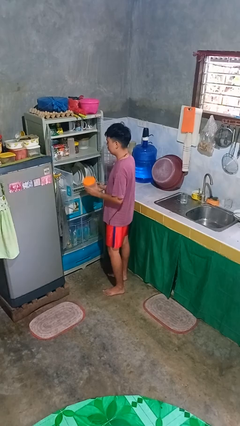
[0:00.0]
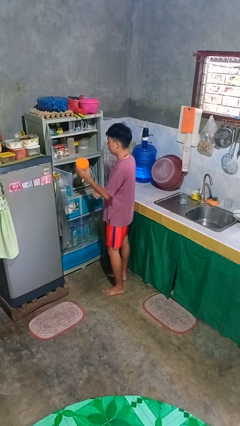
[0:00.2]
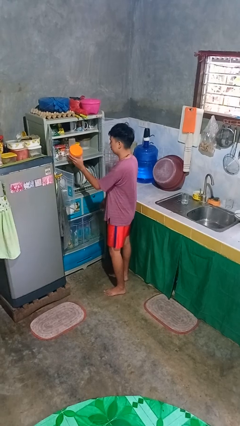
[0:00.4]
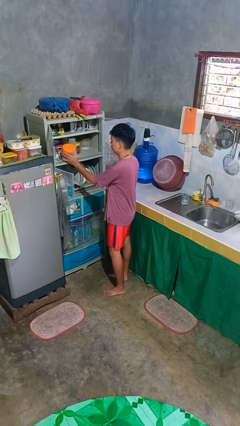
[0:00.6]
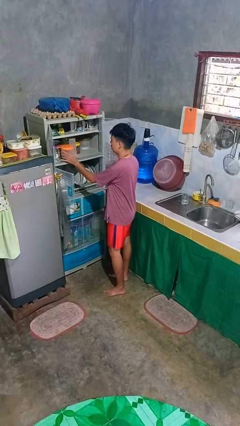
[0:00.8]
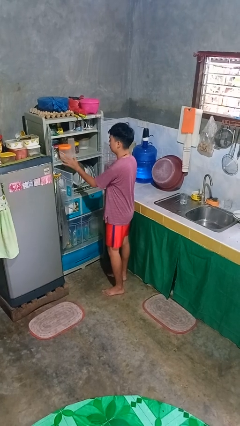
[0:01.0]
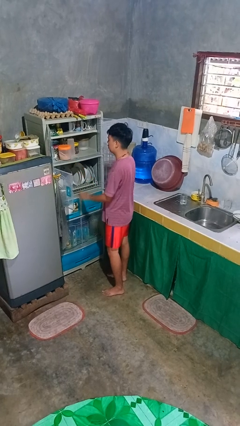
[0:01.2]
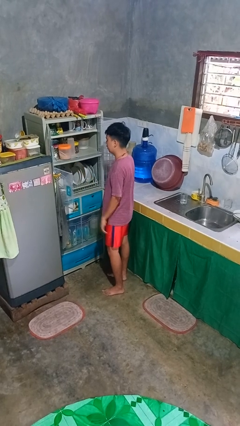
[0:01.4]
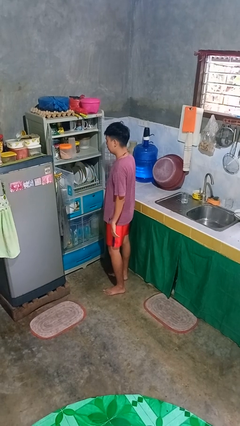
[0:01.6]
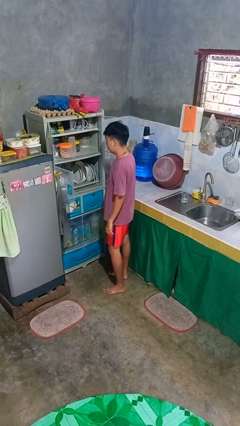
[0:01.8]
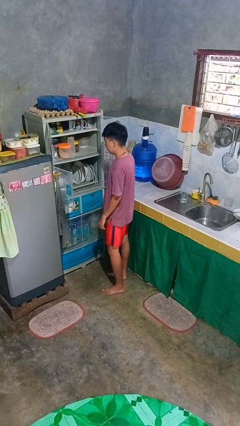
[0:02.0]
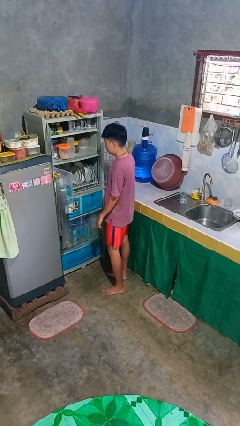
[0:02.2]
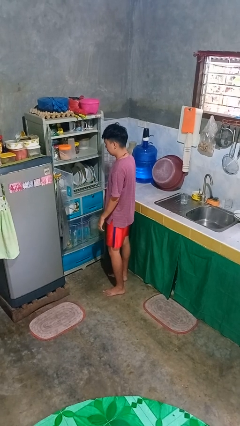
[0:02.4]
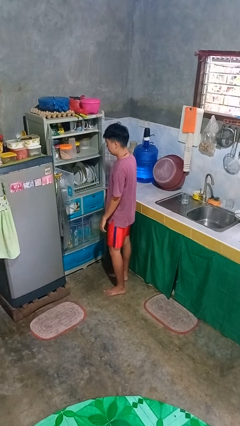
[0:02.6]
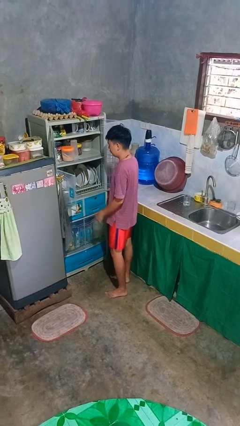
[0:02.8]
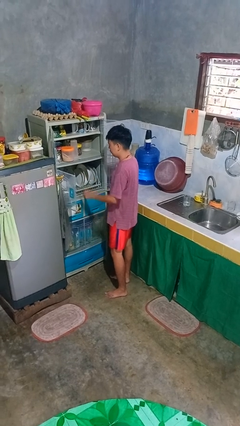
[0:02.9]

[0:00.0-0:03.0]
person puts object in cabinet

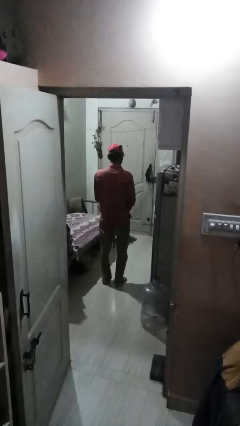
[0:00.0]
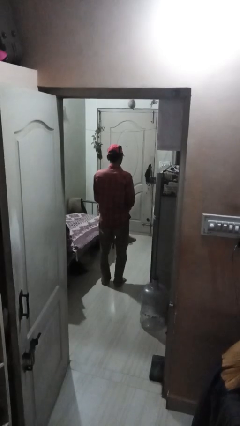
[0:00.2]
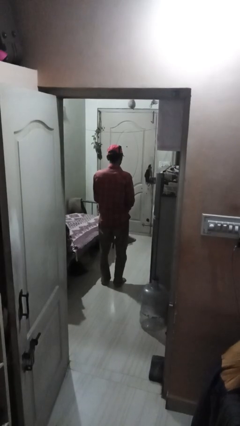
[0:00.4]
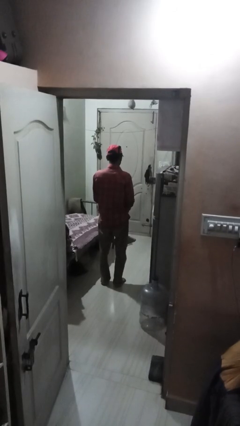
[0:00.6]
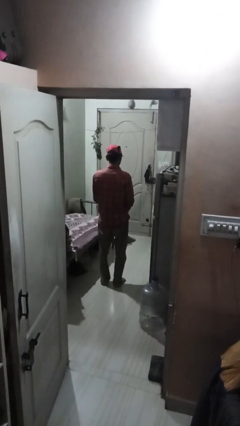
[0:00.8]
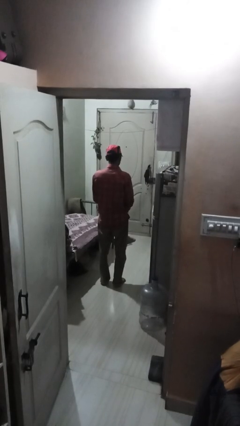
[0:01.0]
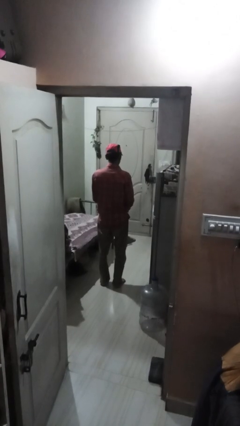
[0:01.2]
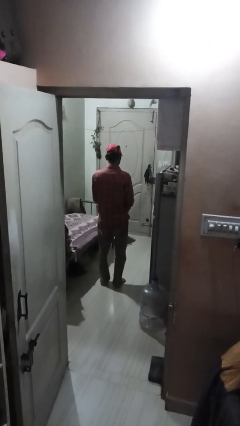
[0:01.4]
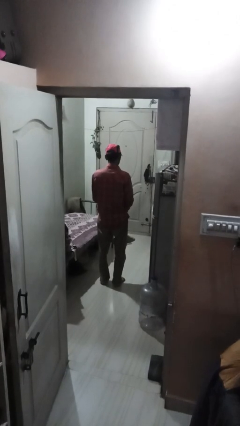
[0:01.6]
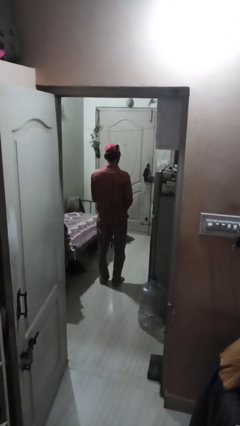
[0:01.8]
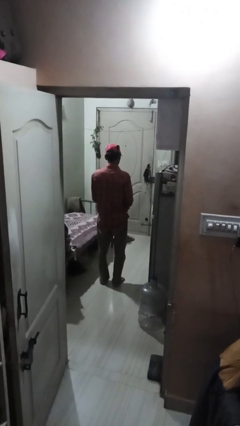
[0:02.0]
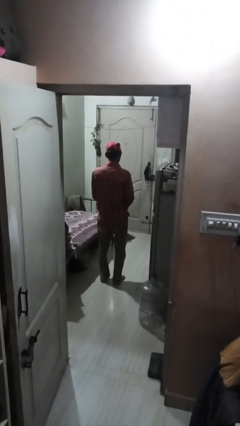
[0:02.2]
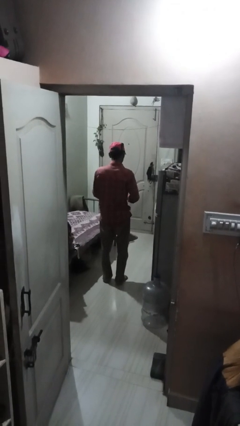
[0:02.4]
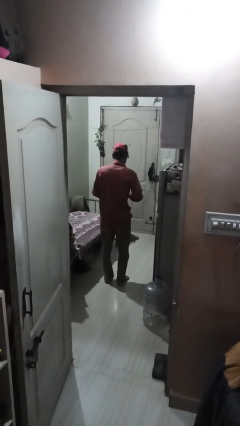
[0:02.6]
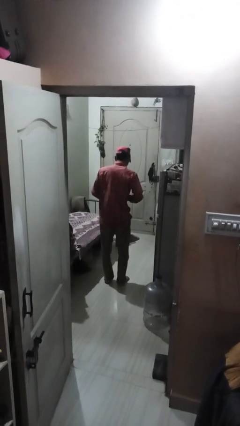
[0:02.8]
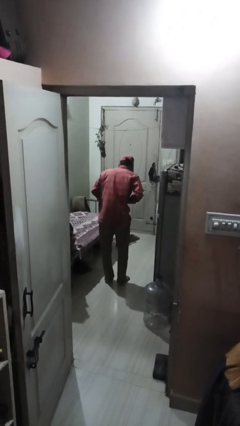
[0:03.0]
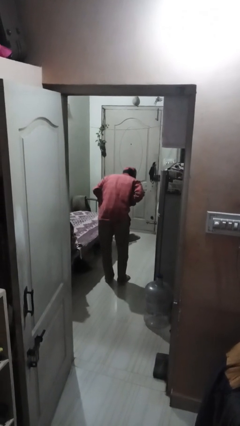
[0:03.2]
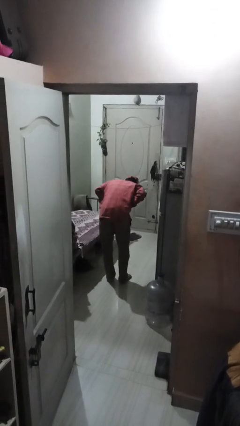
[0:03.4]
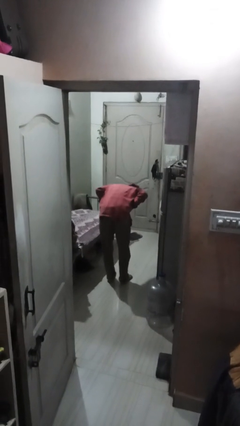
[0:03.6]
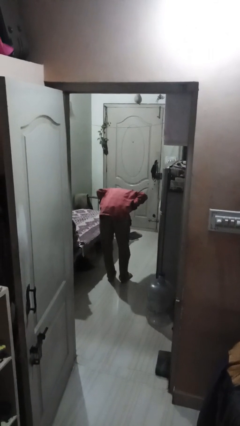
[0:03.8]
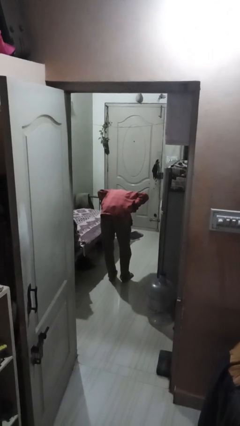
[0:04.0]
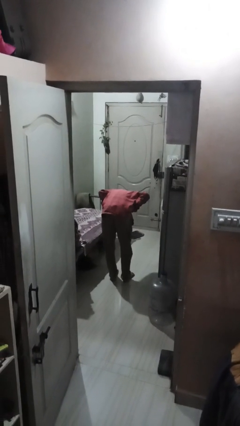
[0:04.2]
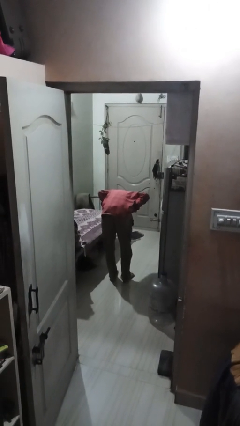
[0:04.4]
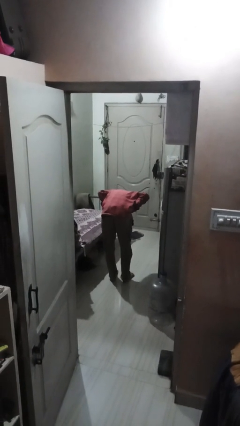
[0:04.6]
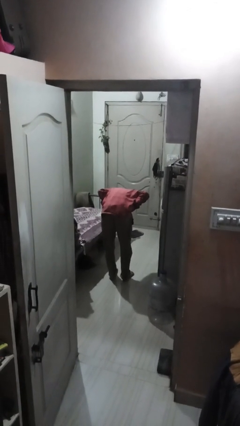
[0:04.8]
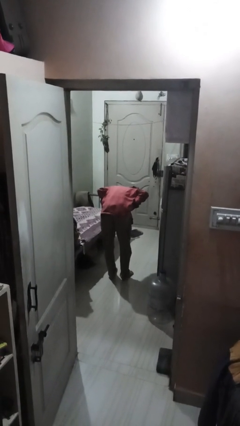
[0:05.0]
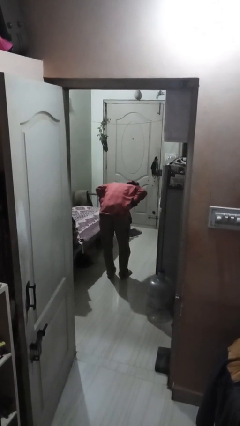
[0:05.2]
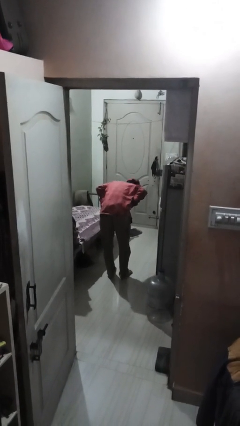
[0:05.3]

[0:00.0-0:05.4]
person bows

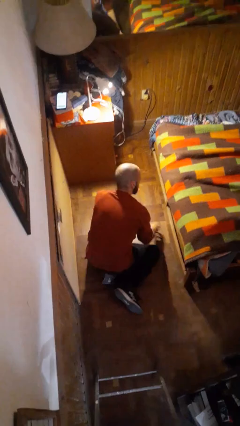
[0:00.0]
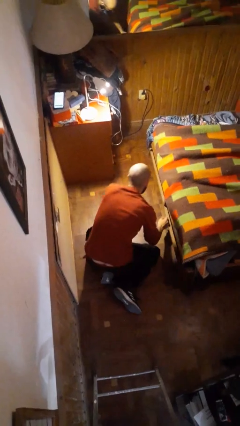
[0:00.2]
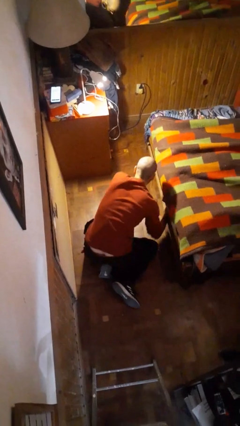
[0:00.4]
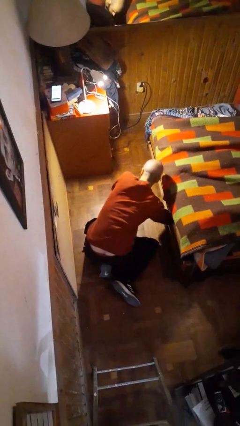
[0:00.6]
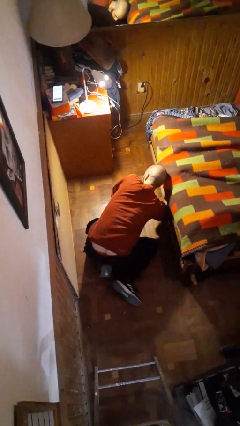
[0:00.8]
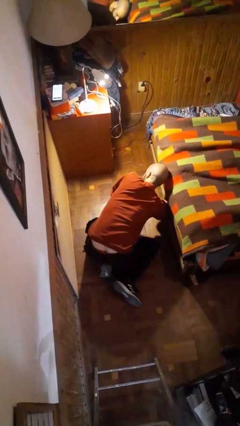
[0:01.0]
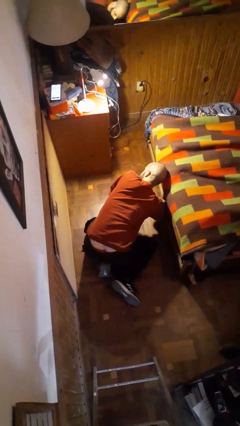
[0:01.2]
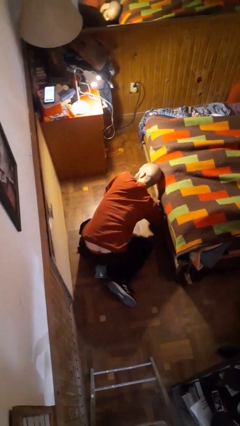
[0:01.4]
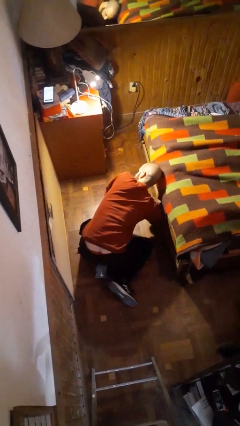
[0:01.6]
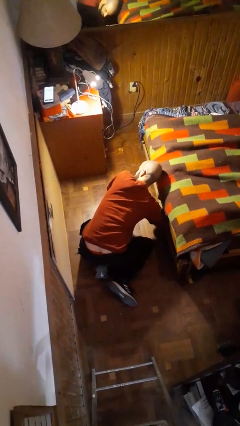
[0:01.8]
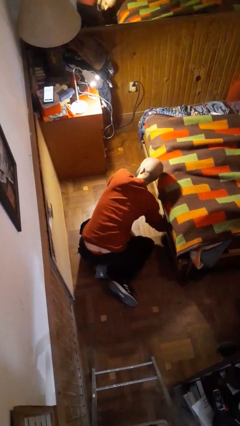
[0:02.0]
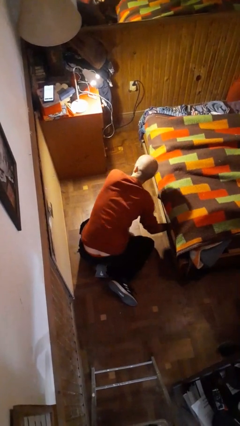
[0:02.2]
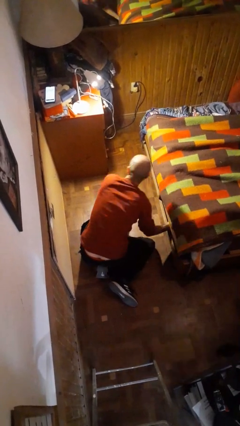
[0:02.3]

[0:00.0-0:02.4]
person searches under bed

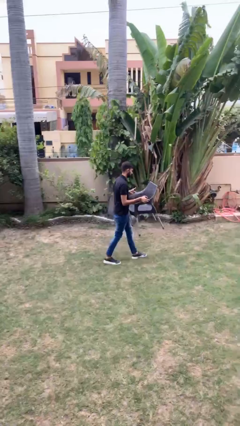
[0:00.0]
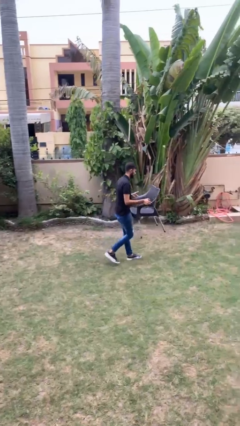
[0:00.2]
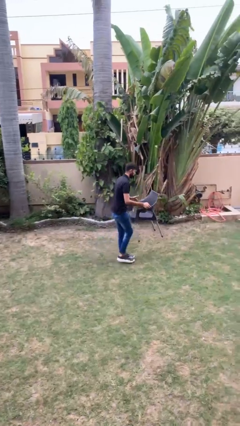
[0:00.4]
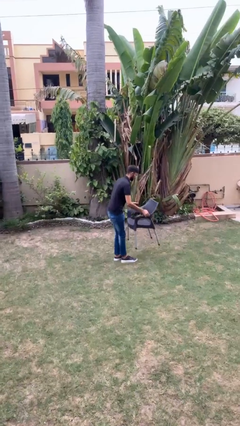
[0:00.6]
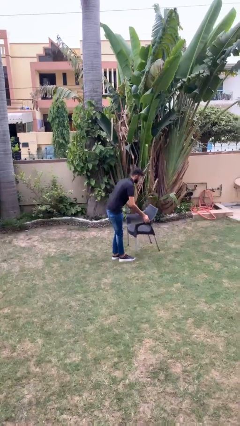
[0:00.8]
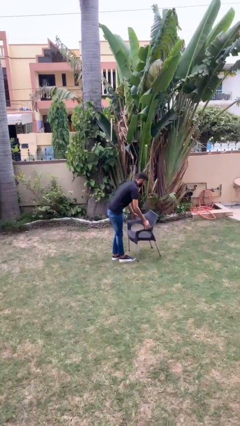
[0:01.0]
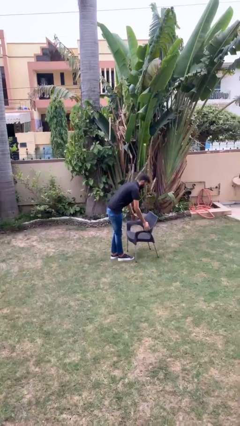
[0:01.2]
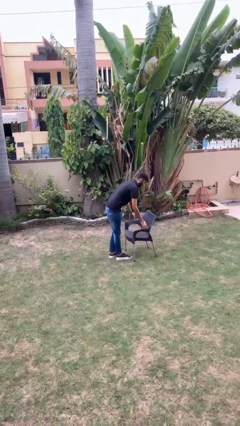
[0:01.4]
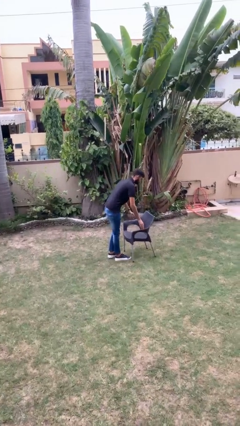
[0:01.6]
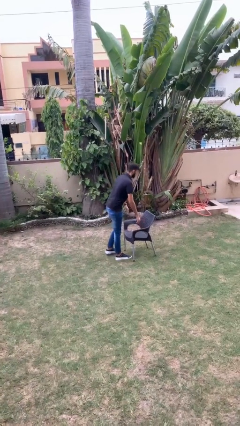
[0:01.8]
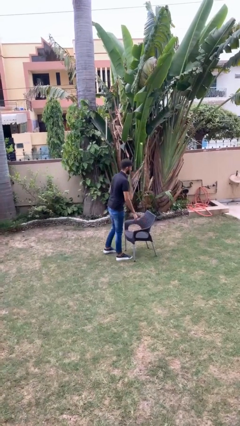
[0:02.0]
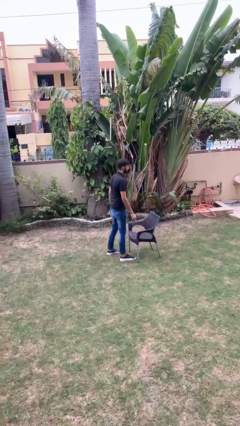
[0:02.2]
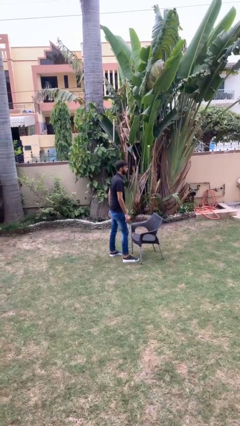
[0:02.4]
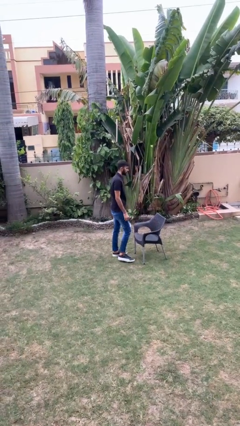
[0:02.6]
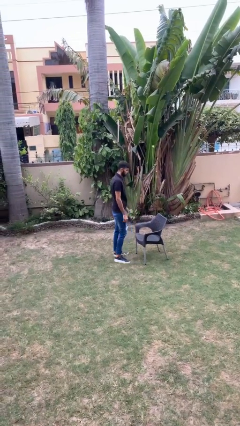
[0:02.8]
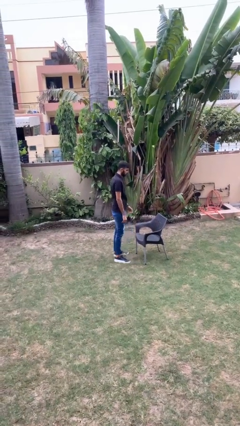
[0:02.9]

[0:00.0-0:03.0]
person puts down object on floor

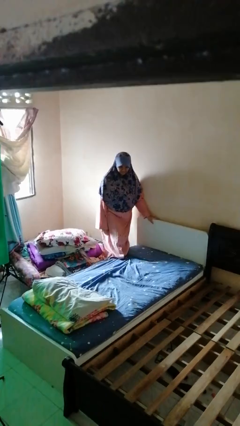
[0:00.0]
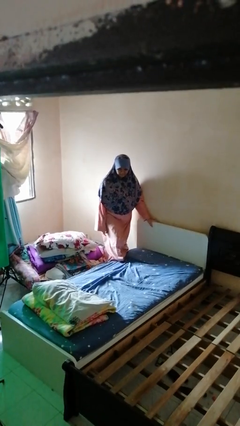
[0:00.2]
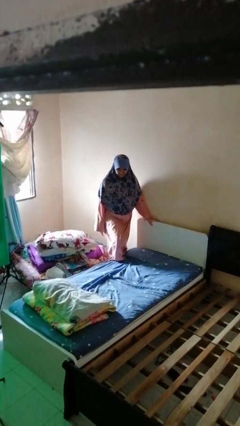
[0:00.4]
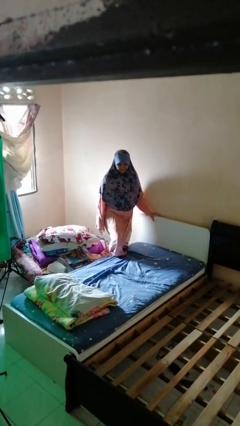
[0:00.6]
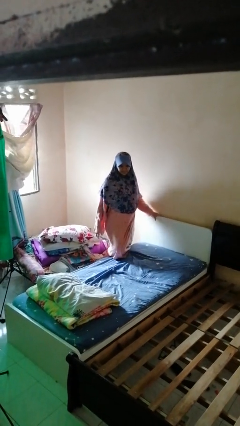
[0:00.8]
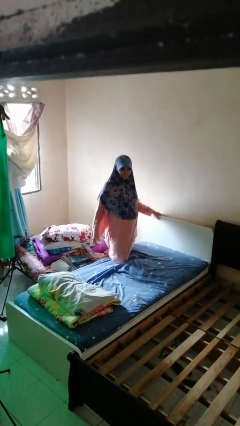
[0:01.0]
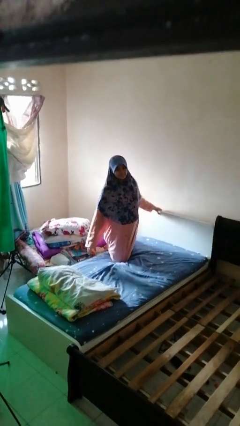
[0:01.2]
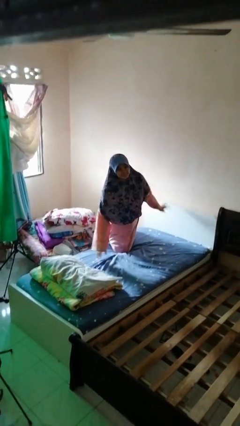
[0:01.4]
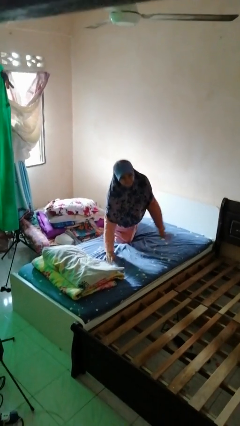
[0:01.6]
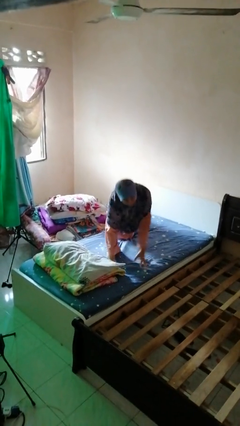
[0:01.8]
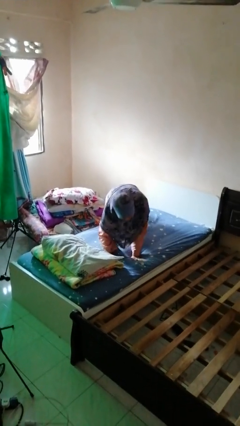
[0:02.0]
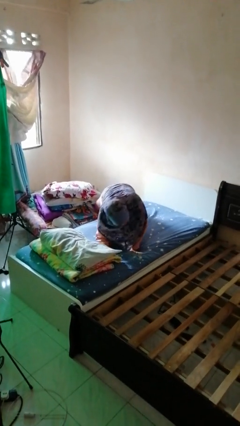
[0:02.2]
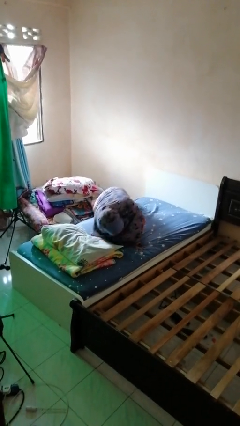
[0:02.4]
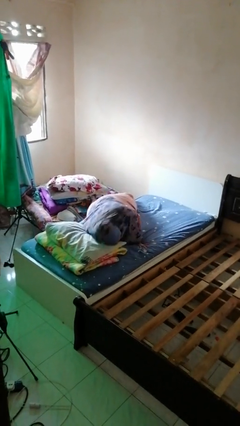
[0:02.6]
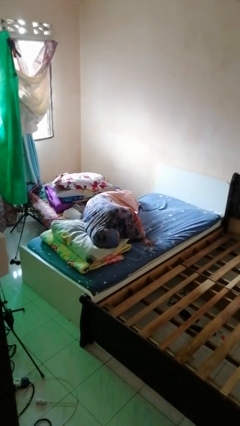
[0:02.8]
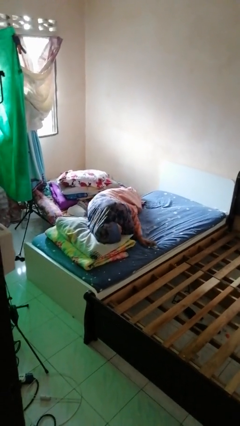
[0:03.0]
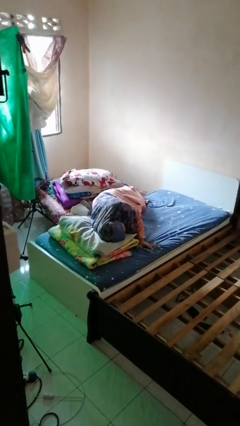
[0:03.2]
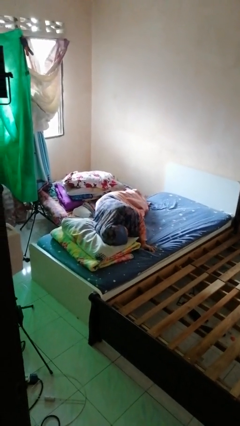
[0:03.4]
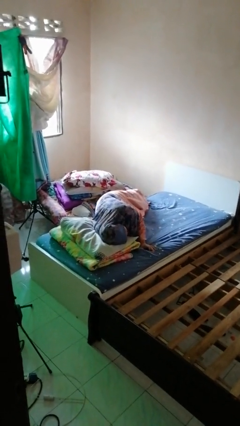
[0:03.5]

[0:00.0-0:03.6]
person lies down on bed

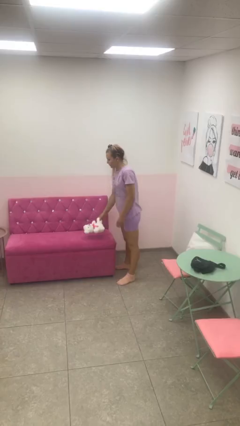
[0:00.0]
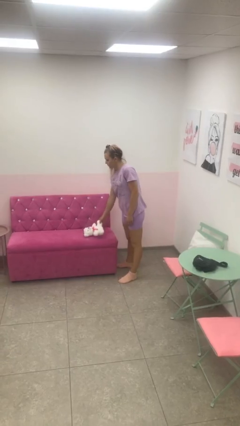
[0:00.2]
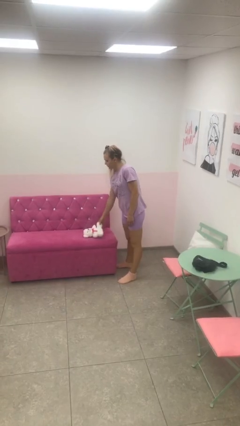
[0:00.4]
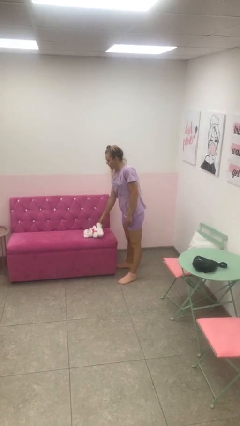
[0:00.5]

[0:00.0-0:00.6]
person puts down object on couch
